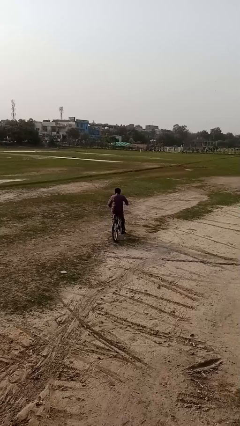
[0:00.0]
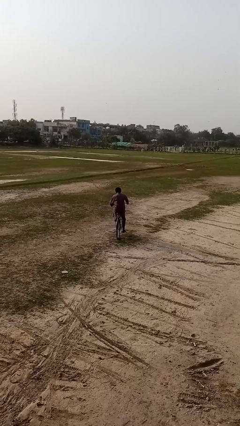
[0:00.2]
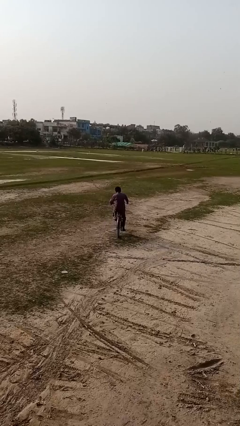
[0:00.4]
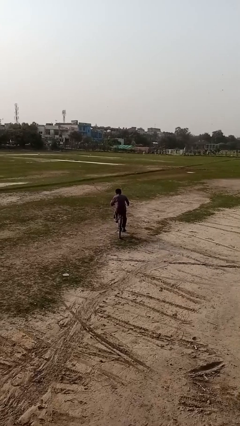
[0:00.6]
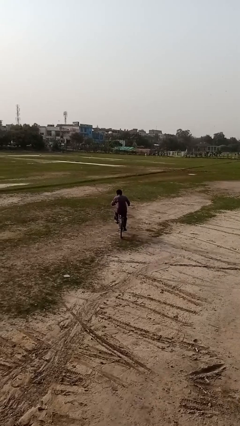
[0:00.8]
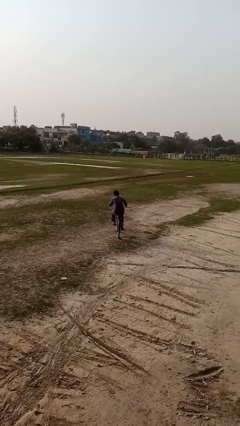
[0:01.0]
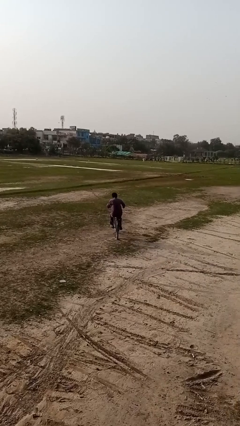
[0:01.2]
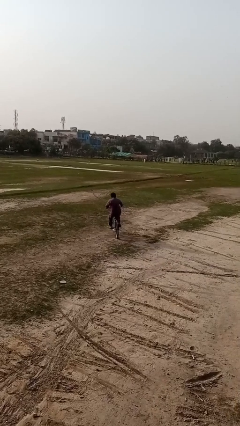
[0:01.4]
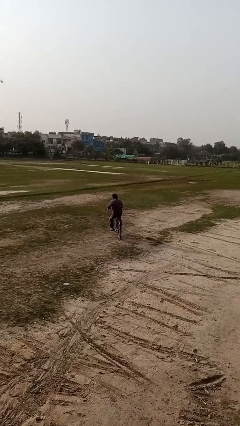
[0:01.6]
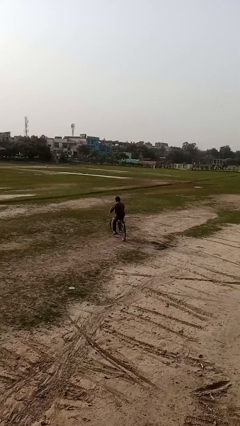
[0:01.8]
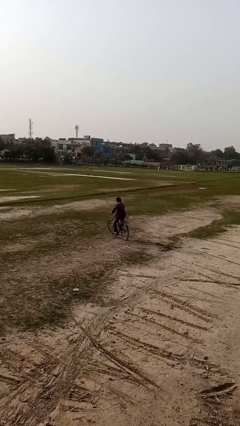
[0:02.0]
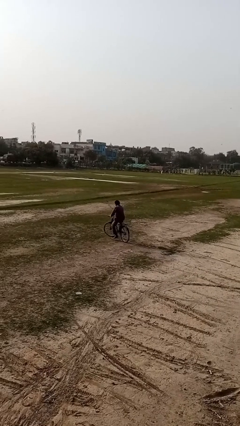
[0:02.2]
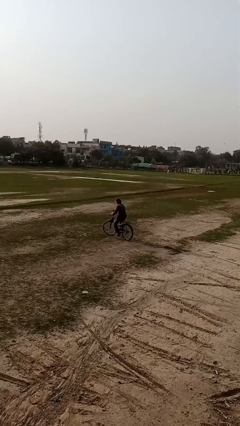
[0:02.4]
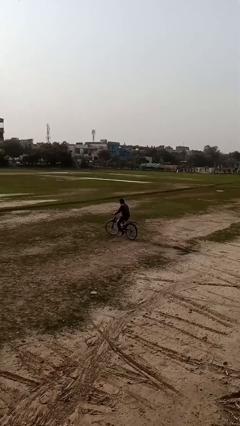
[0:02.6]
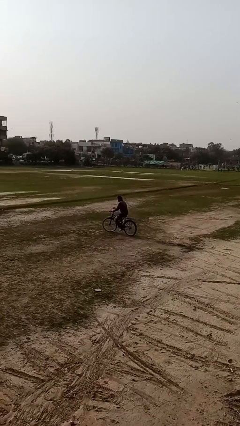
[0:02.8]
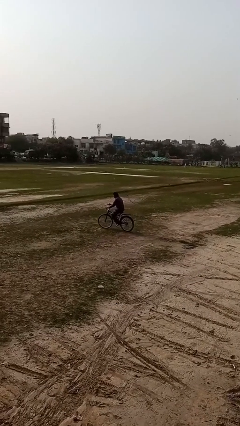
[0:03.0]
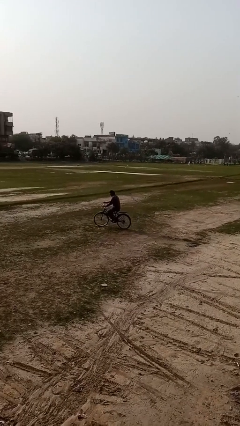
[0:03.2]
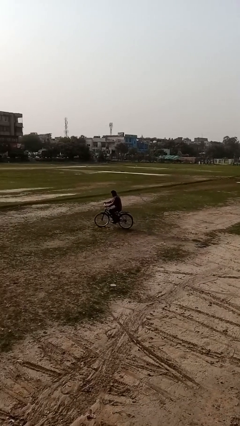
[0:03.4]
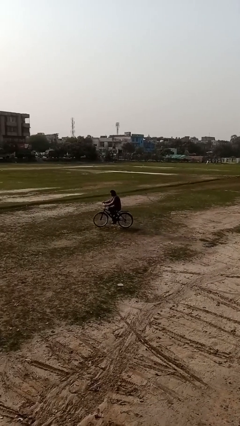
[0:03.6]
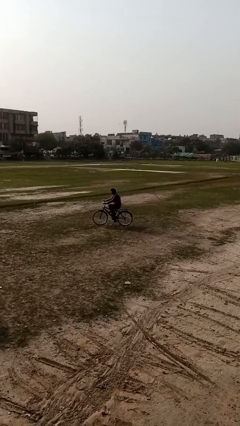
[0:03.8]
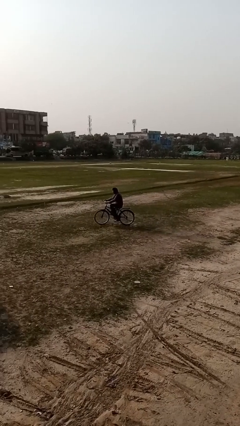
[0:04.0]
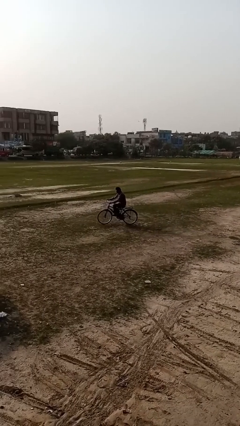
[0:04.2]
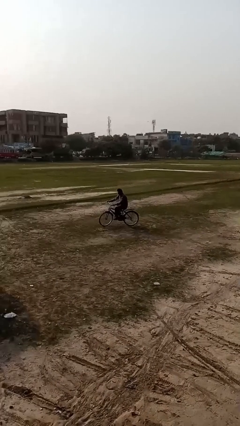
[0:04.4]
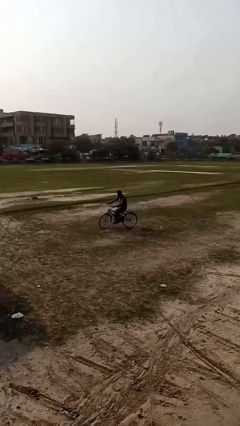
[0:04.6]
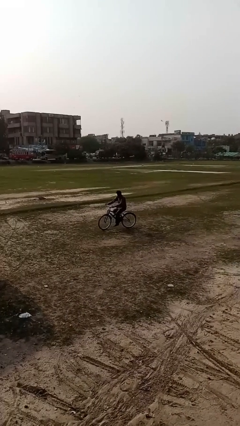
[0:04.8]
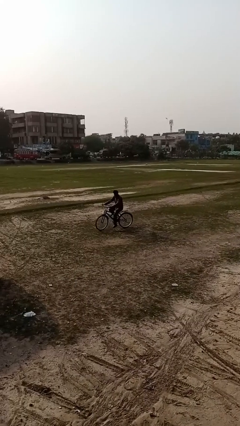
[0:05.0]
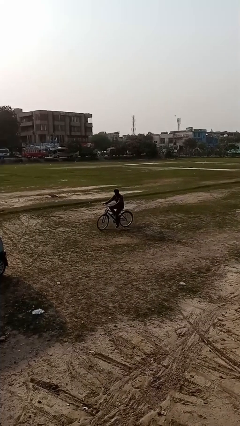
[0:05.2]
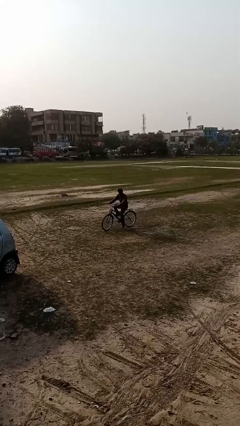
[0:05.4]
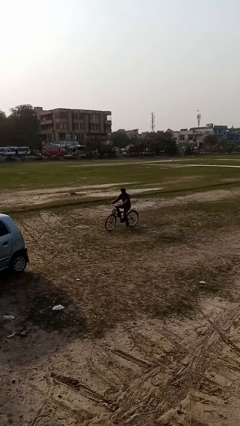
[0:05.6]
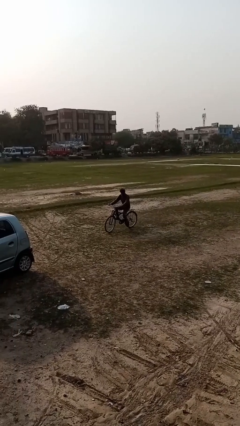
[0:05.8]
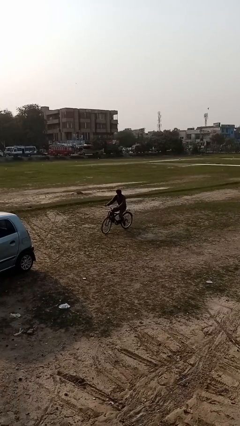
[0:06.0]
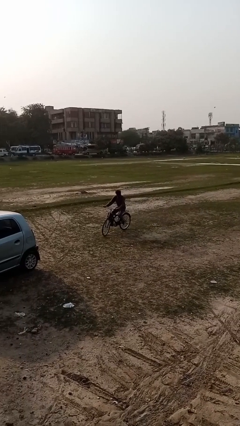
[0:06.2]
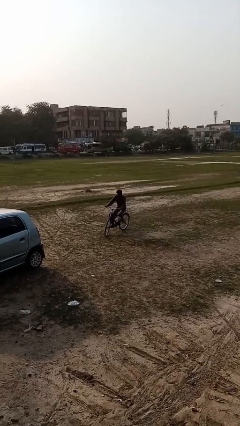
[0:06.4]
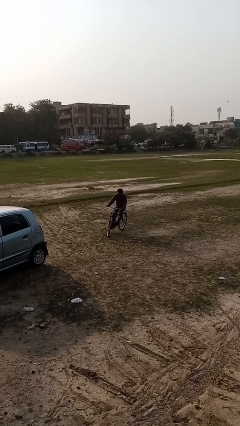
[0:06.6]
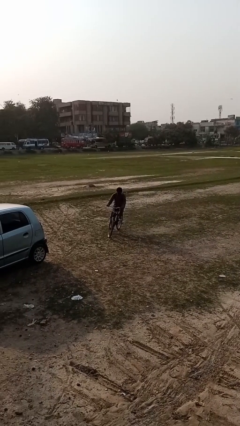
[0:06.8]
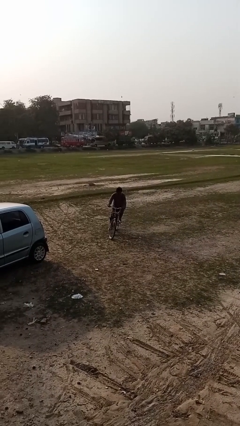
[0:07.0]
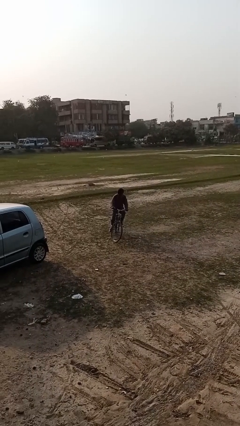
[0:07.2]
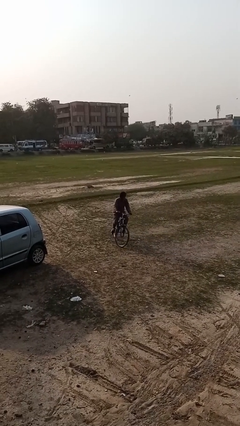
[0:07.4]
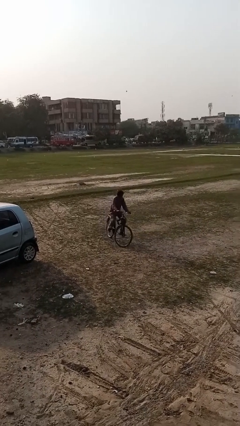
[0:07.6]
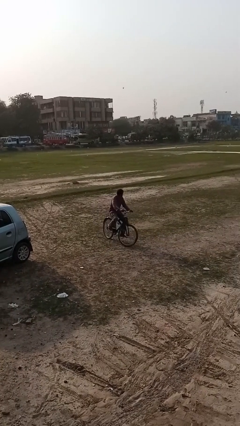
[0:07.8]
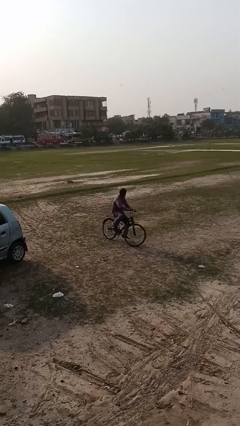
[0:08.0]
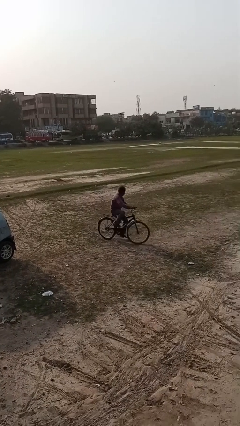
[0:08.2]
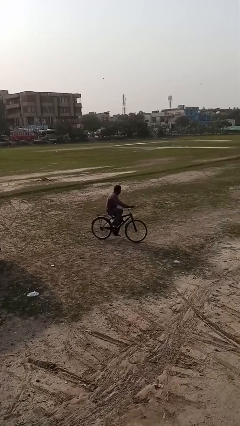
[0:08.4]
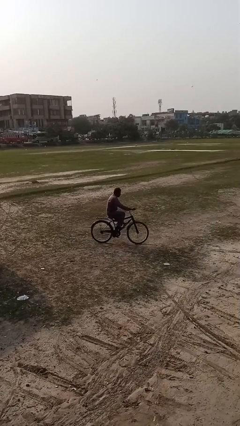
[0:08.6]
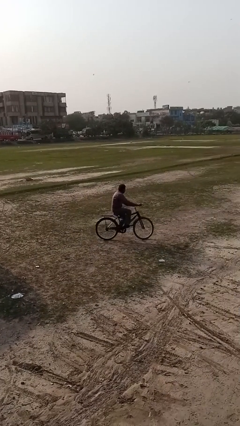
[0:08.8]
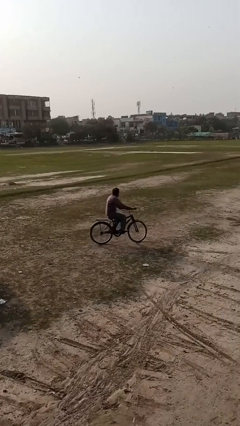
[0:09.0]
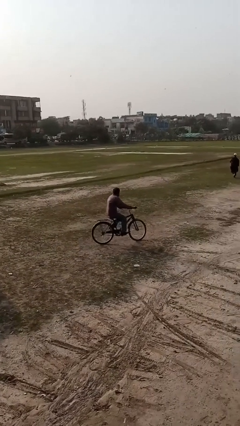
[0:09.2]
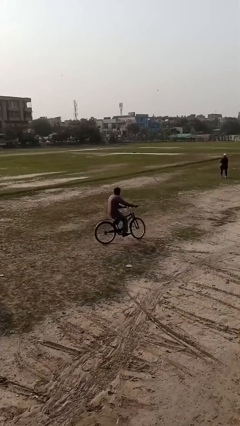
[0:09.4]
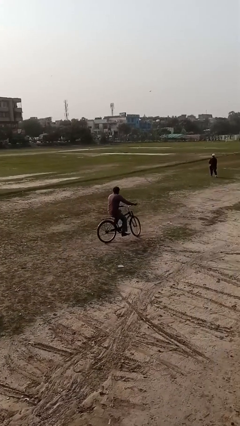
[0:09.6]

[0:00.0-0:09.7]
person rides bicycle

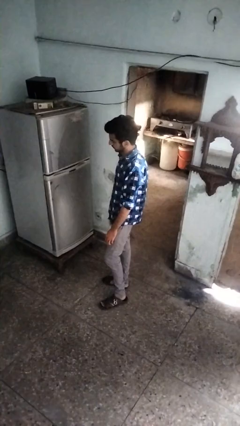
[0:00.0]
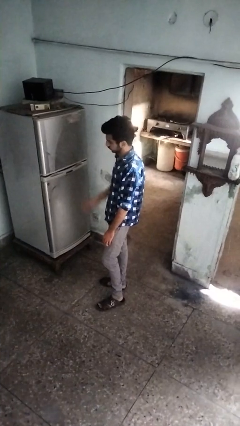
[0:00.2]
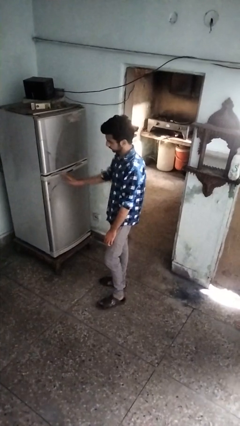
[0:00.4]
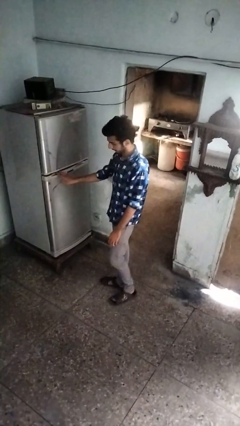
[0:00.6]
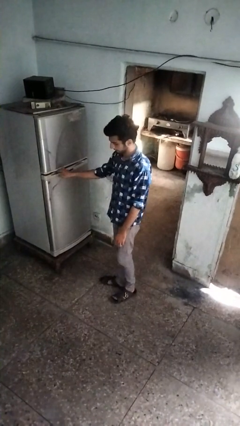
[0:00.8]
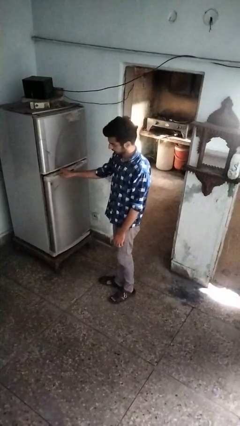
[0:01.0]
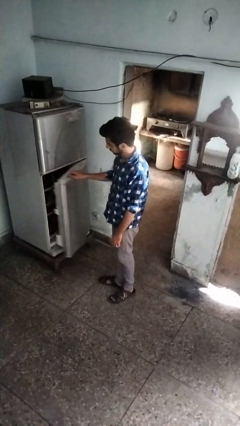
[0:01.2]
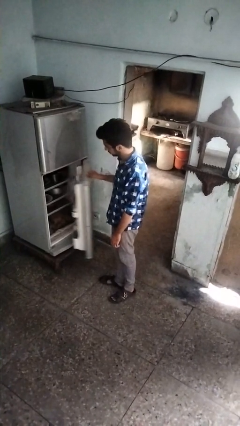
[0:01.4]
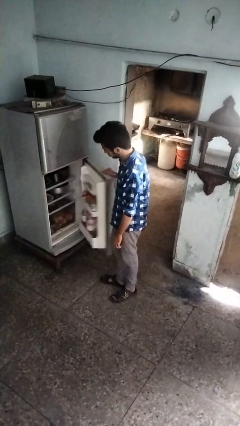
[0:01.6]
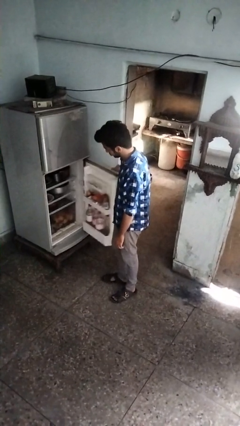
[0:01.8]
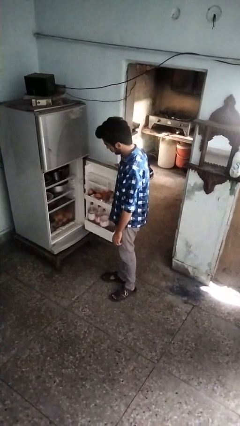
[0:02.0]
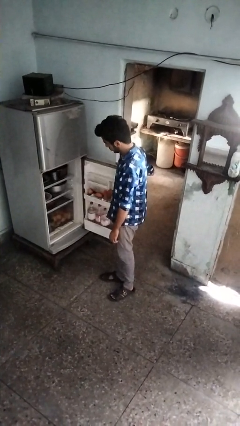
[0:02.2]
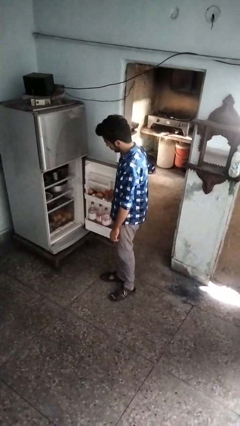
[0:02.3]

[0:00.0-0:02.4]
person opens refrigerator

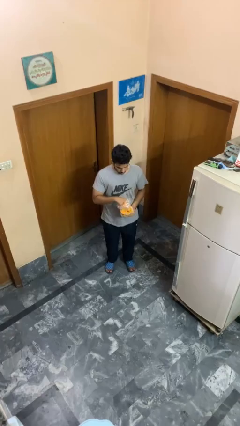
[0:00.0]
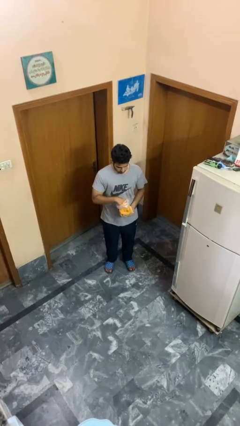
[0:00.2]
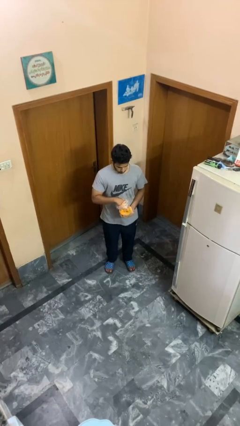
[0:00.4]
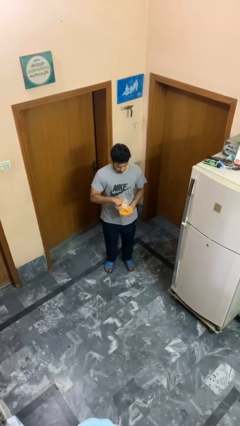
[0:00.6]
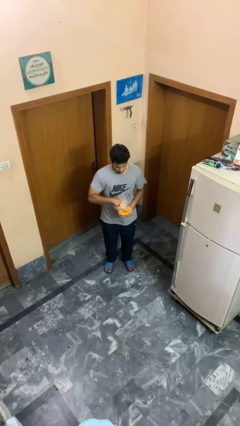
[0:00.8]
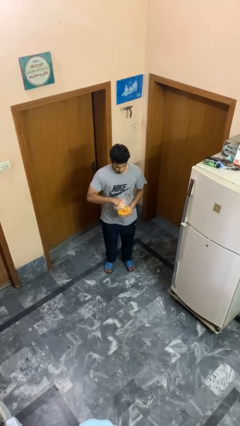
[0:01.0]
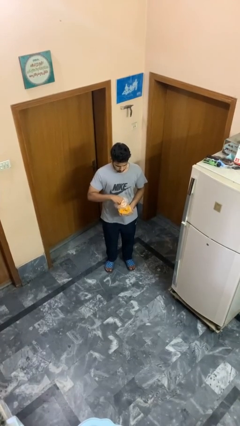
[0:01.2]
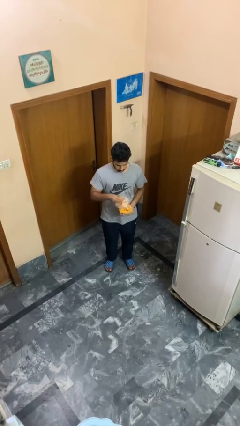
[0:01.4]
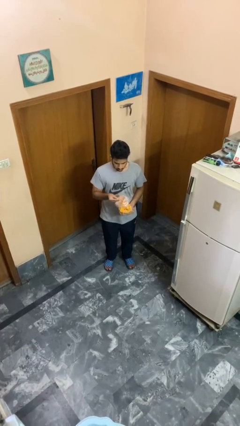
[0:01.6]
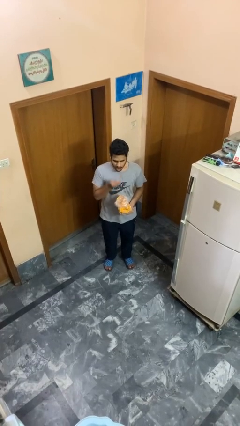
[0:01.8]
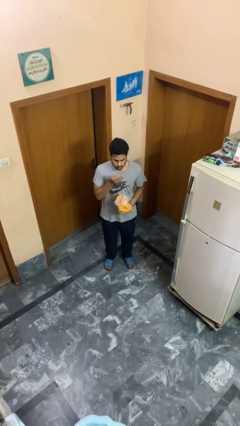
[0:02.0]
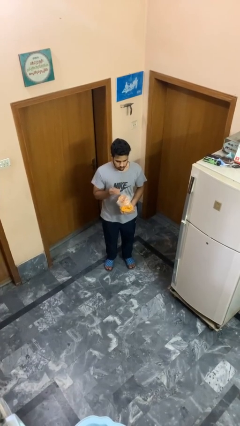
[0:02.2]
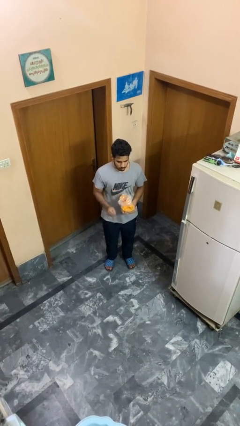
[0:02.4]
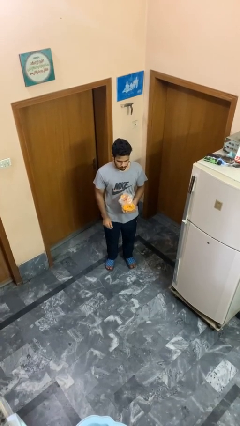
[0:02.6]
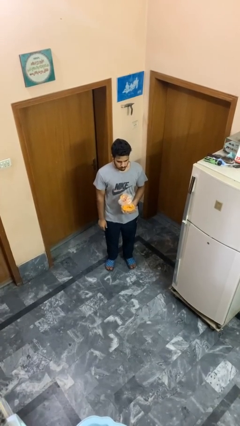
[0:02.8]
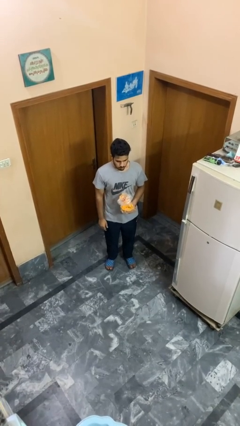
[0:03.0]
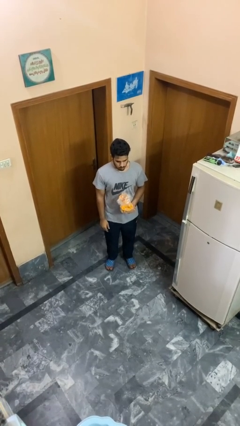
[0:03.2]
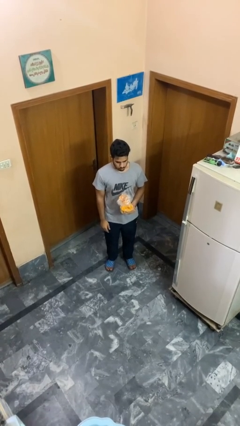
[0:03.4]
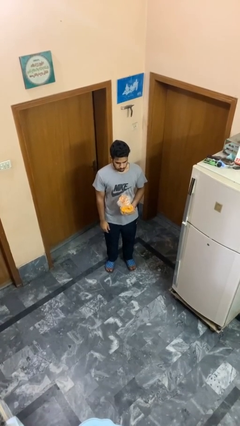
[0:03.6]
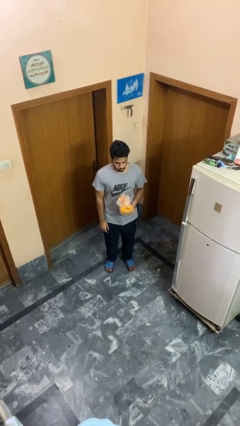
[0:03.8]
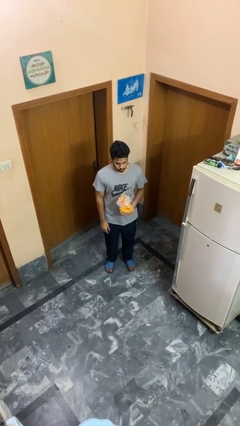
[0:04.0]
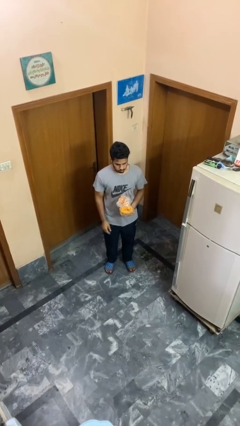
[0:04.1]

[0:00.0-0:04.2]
person eats snack from bag

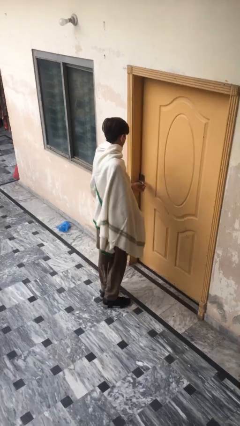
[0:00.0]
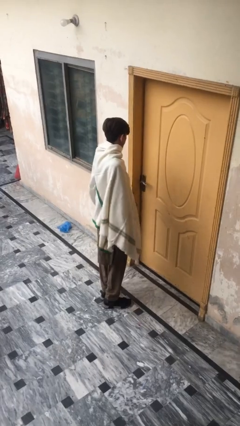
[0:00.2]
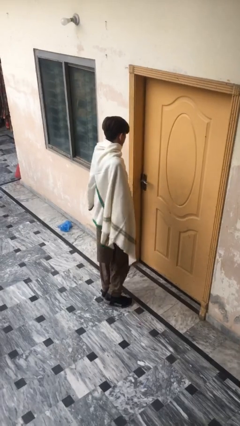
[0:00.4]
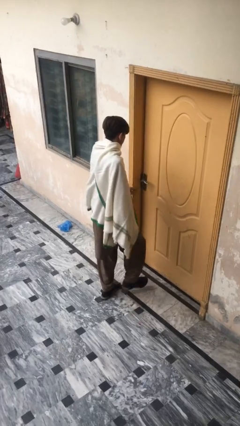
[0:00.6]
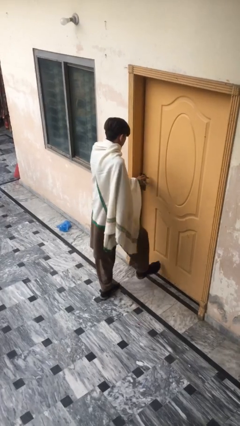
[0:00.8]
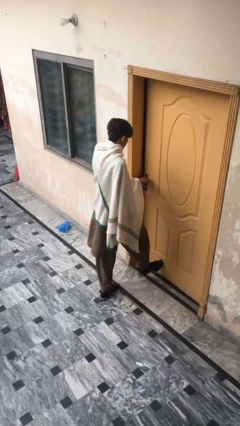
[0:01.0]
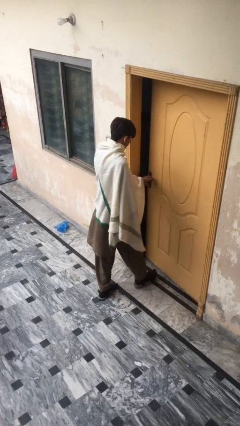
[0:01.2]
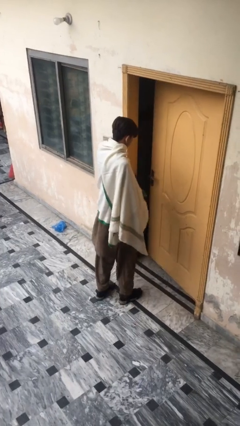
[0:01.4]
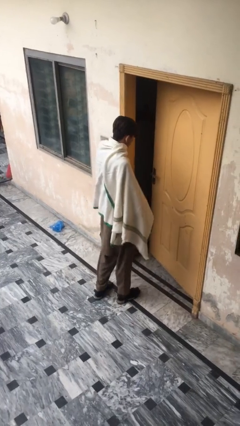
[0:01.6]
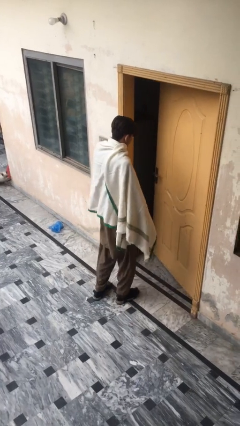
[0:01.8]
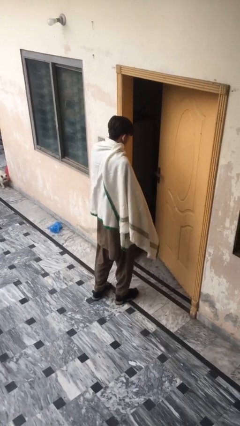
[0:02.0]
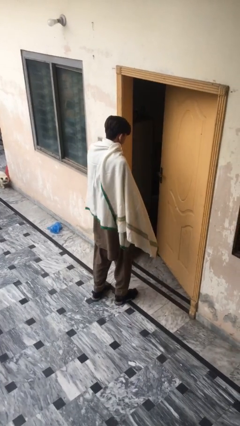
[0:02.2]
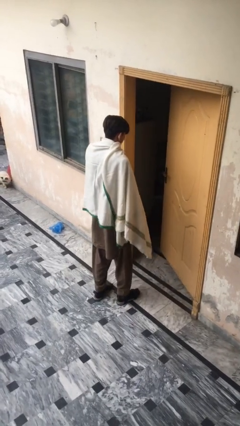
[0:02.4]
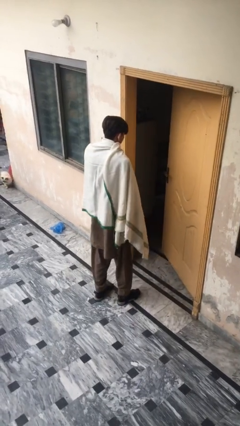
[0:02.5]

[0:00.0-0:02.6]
person opens facility door
